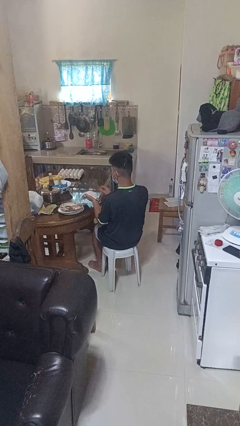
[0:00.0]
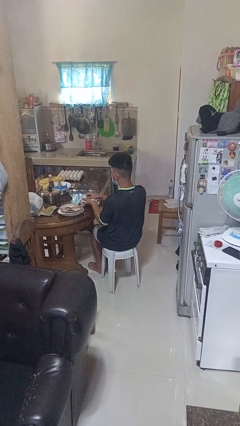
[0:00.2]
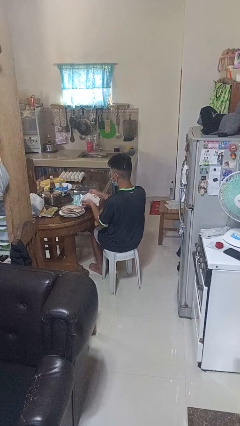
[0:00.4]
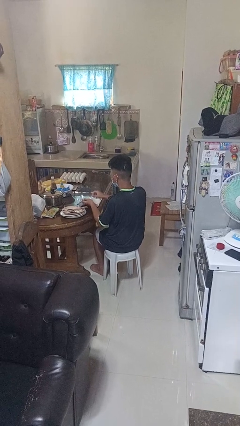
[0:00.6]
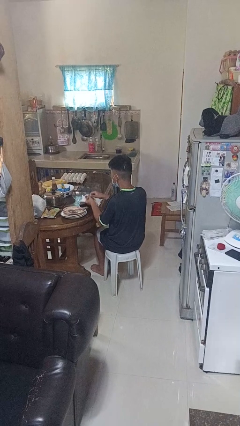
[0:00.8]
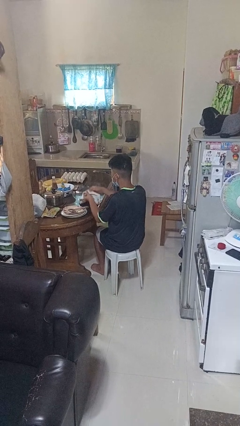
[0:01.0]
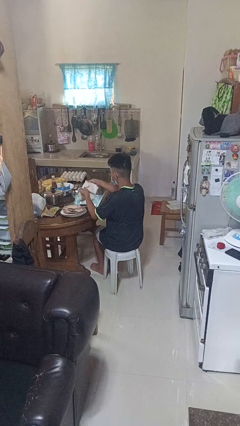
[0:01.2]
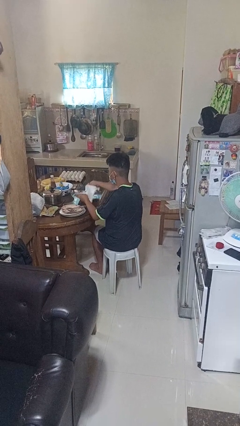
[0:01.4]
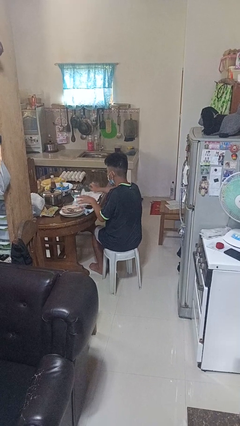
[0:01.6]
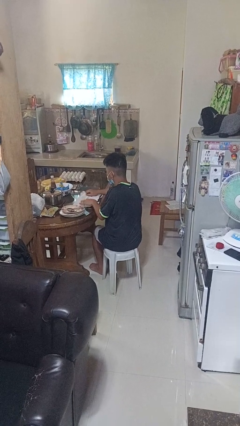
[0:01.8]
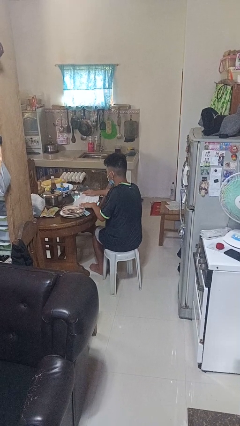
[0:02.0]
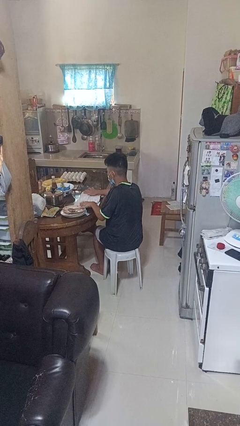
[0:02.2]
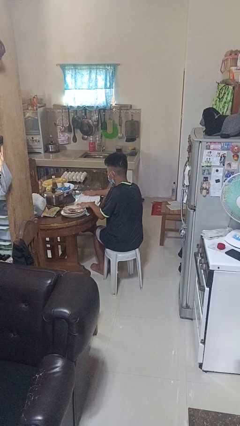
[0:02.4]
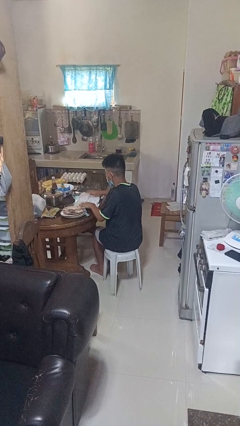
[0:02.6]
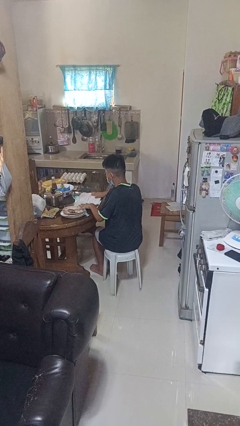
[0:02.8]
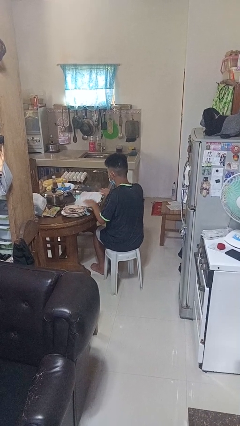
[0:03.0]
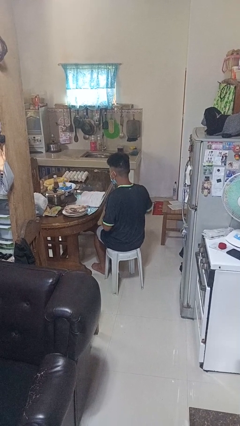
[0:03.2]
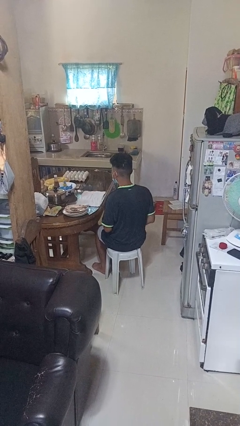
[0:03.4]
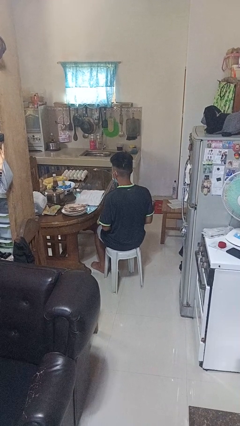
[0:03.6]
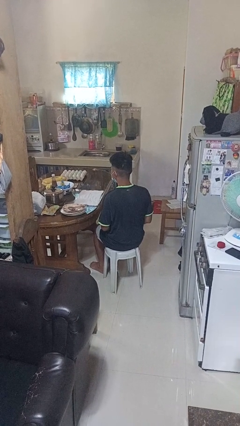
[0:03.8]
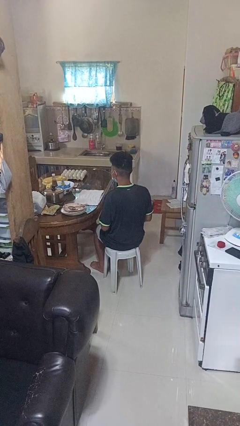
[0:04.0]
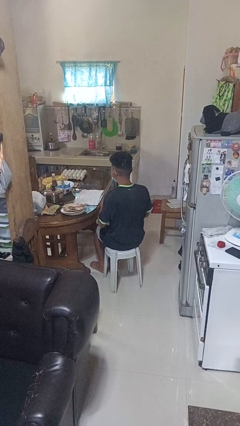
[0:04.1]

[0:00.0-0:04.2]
person spreads tablecloth

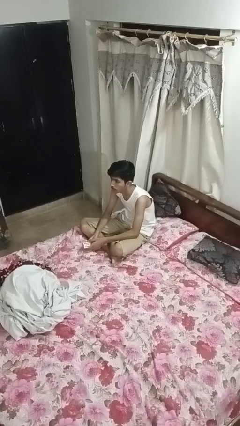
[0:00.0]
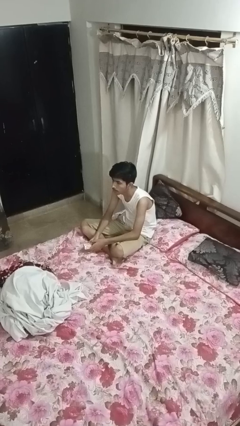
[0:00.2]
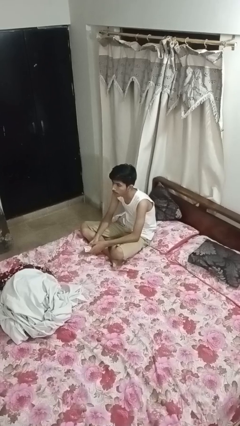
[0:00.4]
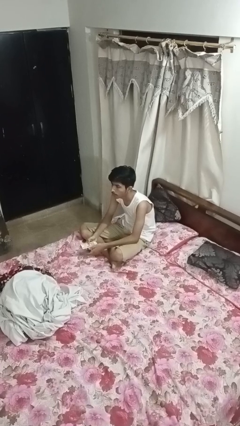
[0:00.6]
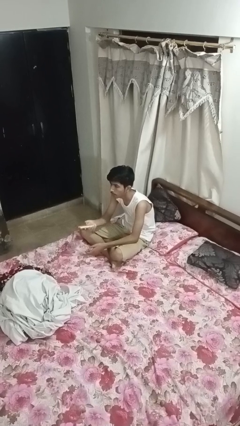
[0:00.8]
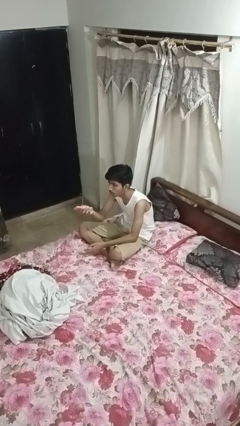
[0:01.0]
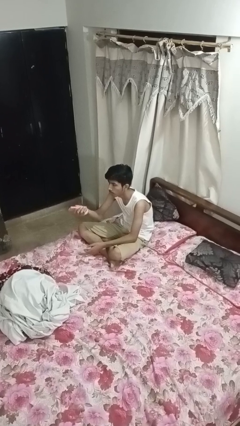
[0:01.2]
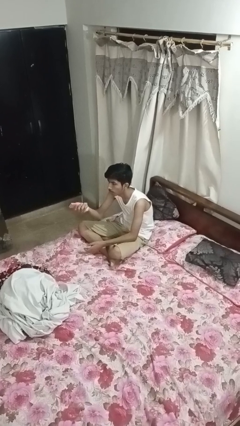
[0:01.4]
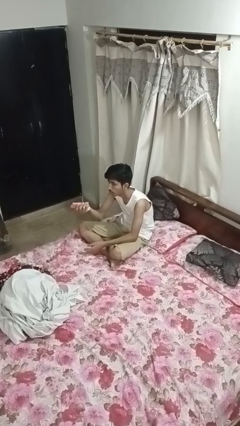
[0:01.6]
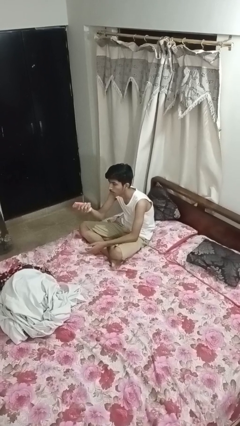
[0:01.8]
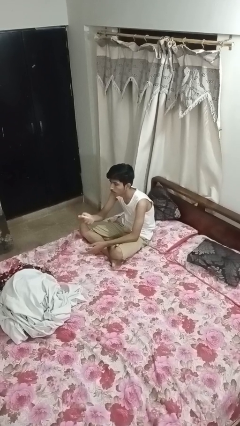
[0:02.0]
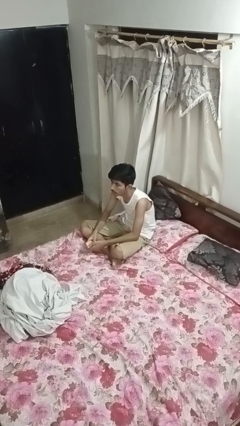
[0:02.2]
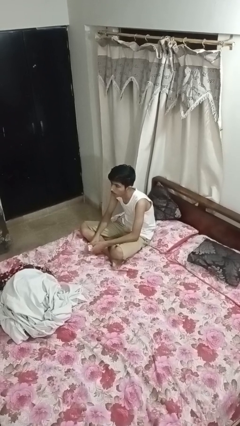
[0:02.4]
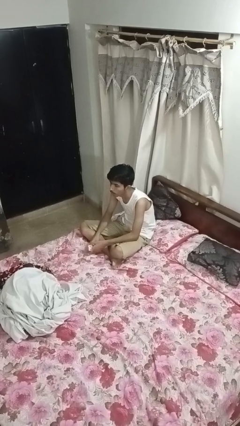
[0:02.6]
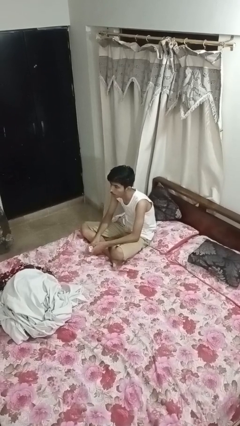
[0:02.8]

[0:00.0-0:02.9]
person uses television remote

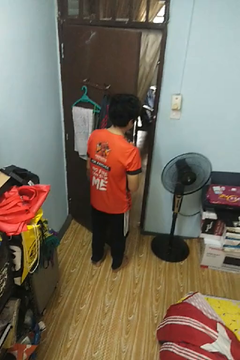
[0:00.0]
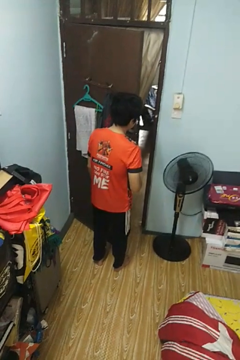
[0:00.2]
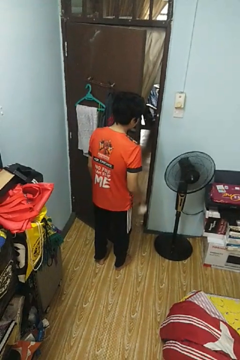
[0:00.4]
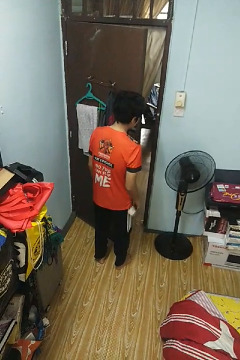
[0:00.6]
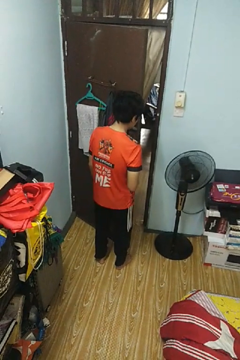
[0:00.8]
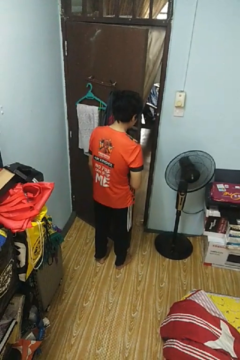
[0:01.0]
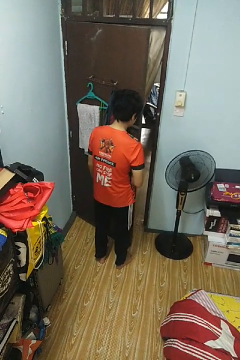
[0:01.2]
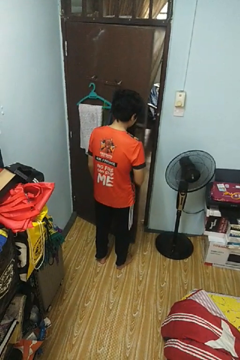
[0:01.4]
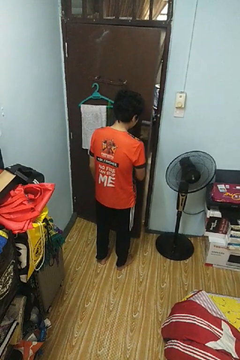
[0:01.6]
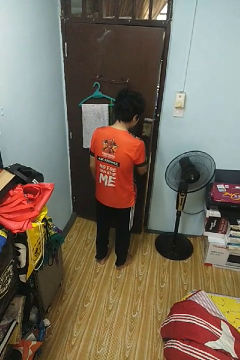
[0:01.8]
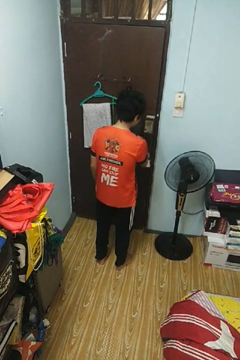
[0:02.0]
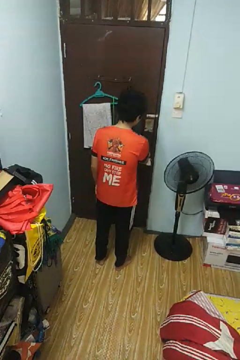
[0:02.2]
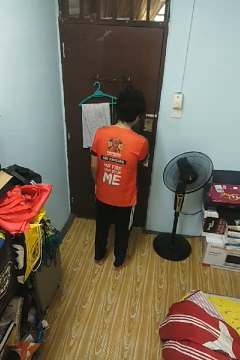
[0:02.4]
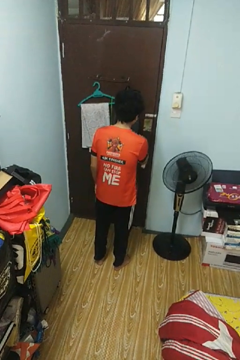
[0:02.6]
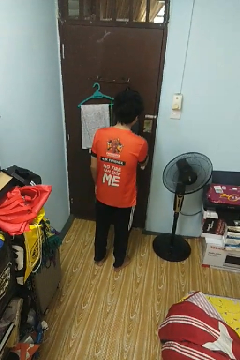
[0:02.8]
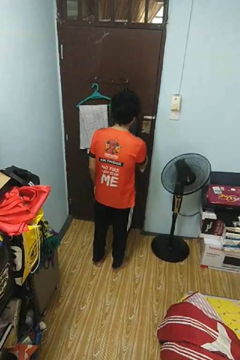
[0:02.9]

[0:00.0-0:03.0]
person closes facility door

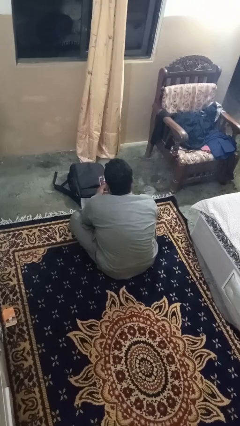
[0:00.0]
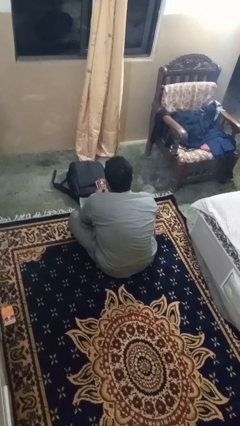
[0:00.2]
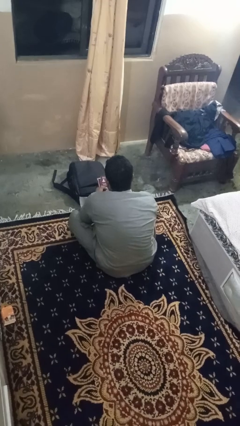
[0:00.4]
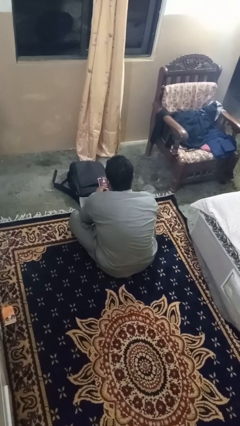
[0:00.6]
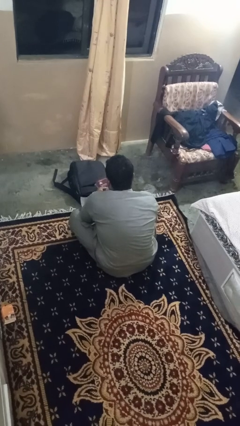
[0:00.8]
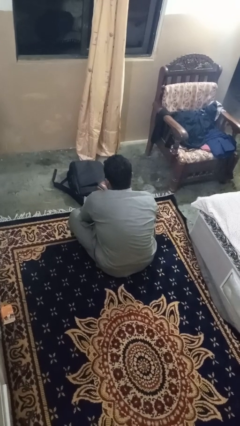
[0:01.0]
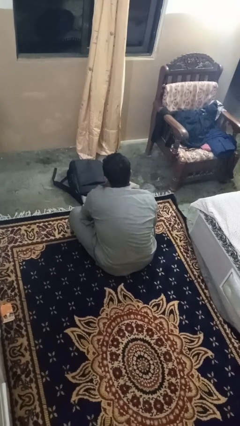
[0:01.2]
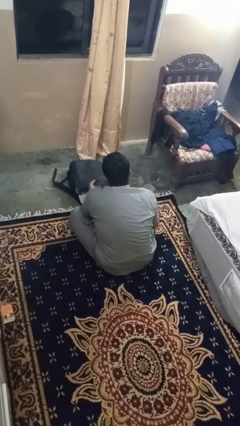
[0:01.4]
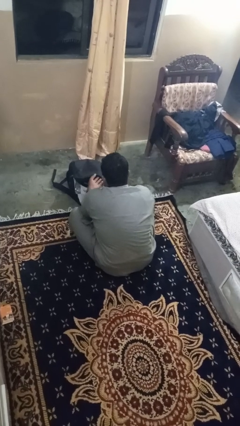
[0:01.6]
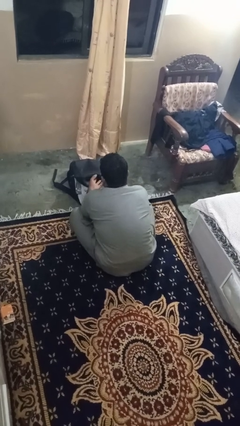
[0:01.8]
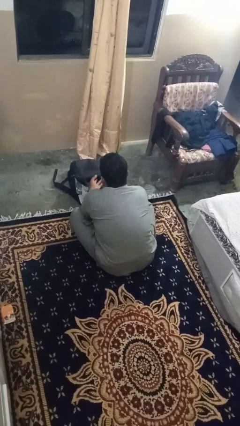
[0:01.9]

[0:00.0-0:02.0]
person puts object into bag

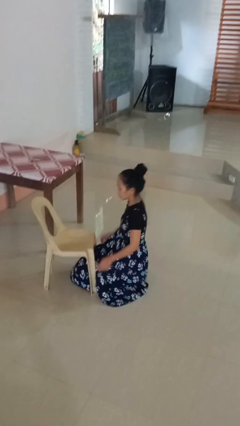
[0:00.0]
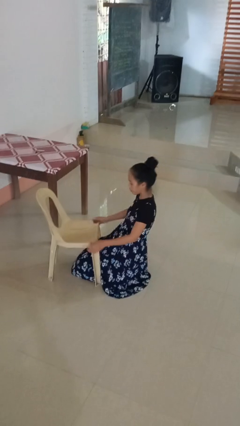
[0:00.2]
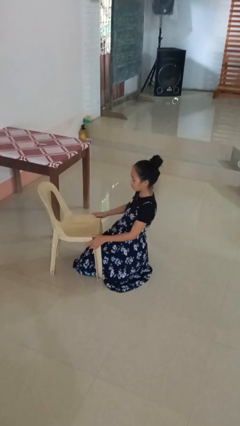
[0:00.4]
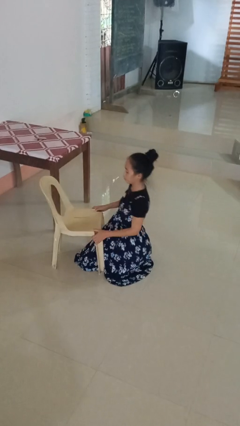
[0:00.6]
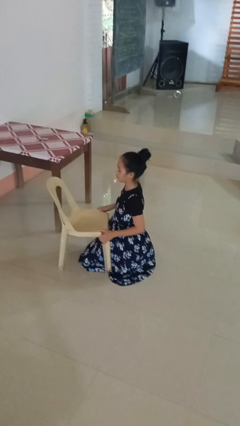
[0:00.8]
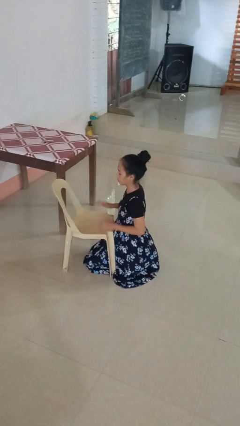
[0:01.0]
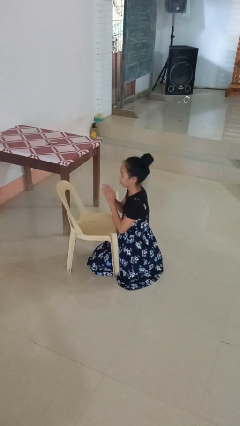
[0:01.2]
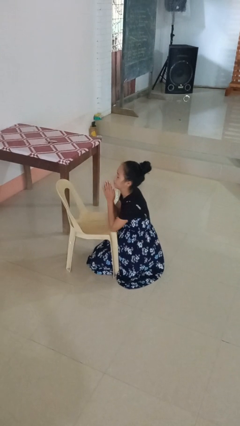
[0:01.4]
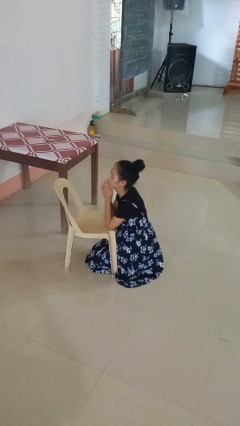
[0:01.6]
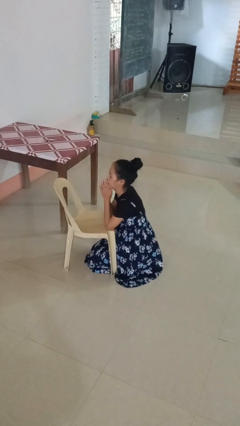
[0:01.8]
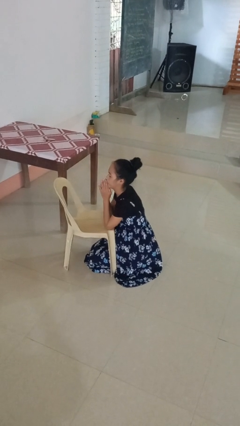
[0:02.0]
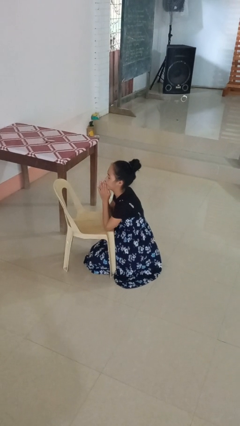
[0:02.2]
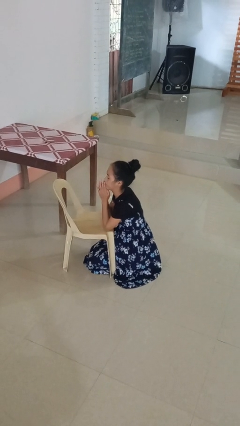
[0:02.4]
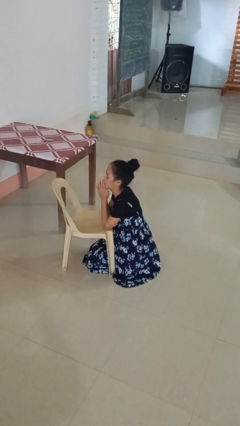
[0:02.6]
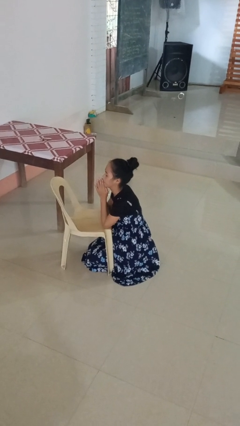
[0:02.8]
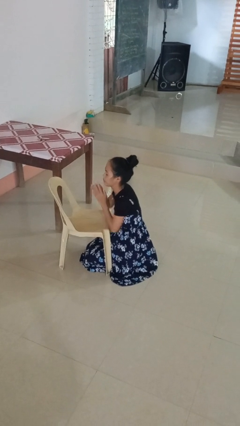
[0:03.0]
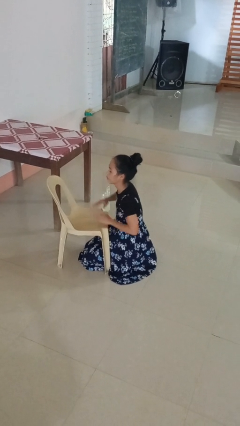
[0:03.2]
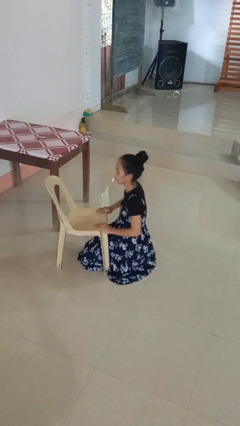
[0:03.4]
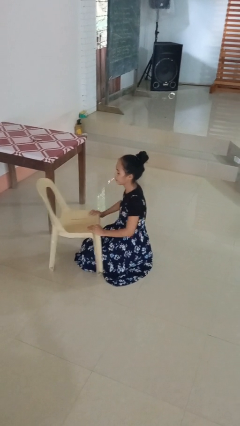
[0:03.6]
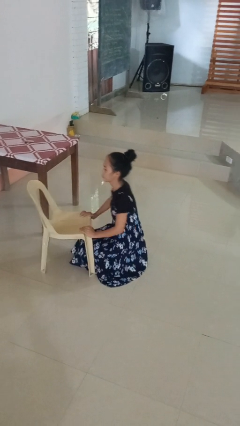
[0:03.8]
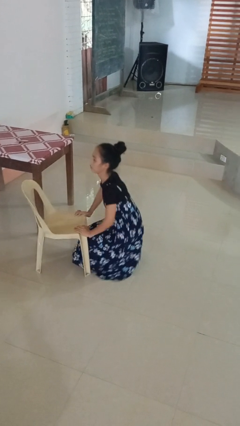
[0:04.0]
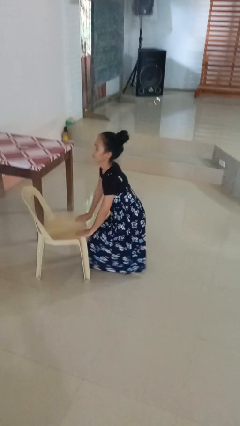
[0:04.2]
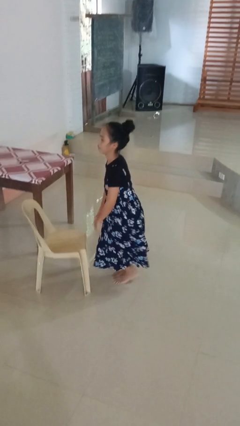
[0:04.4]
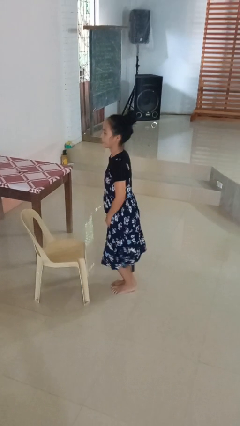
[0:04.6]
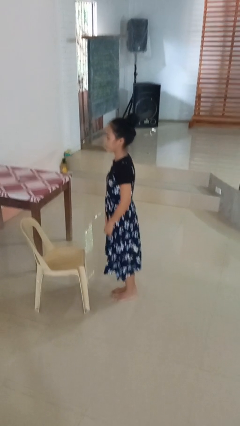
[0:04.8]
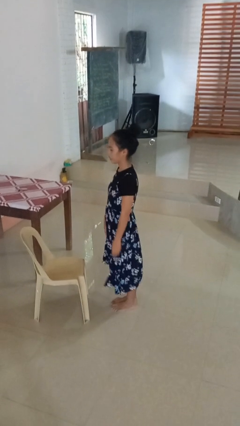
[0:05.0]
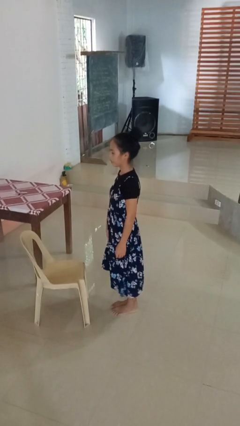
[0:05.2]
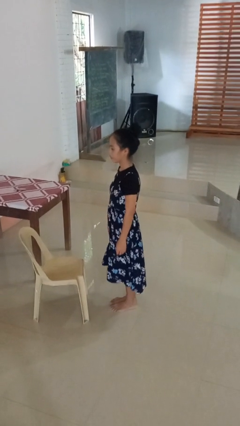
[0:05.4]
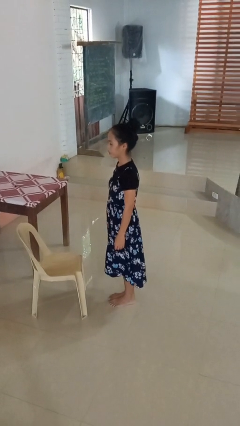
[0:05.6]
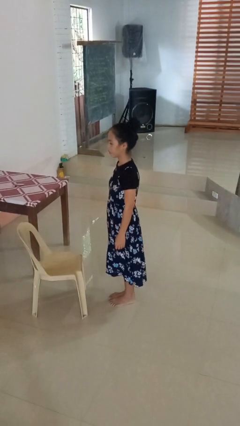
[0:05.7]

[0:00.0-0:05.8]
person prays

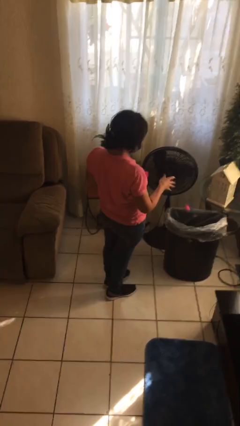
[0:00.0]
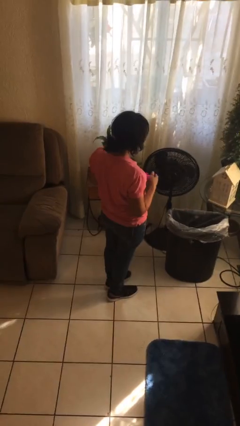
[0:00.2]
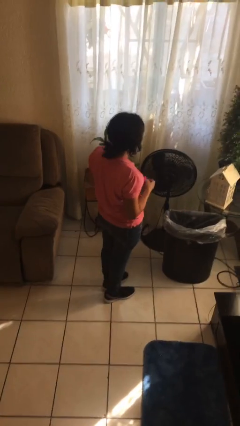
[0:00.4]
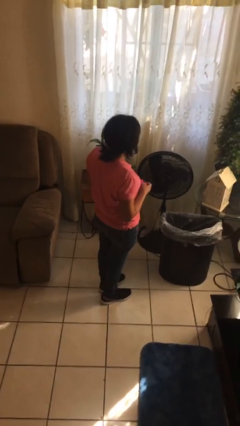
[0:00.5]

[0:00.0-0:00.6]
person discards trash
